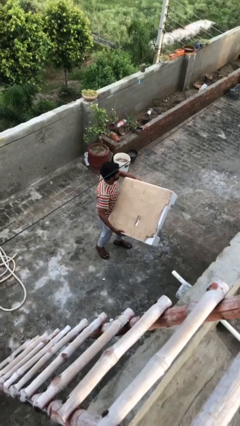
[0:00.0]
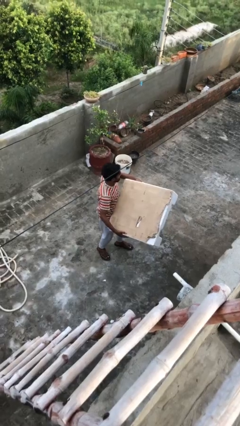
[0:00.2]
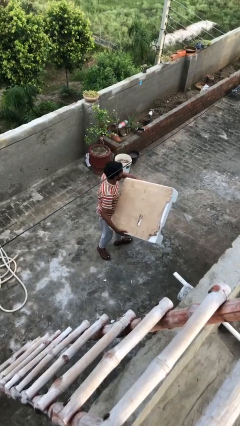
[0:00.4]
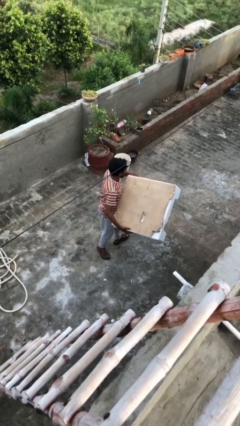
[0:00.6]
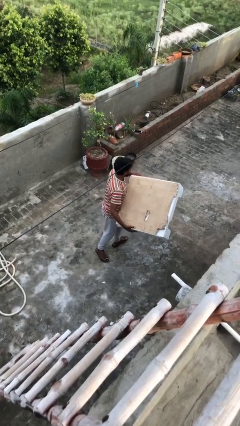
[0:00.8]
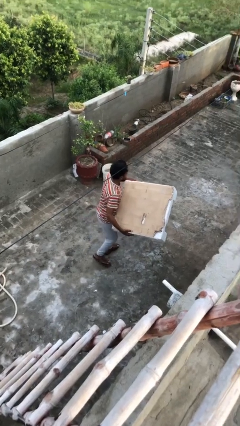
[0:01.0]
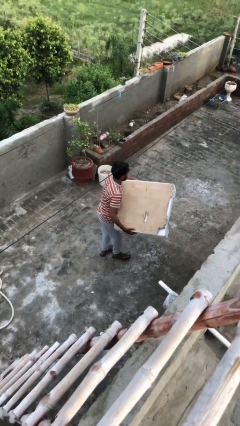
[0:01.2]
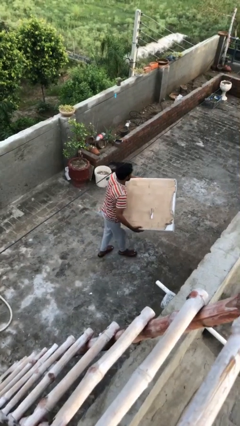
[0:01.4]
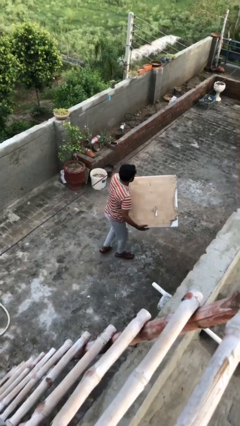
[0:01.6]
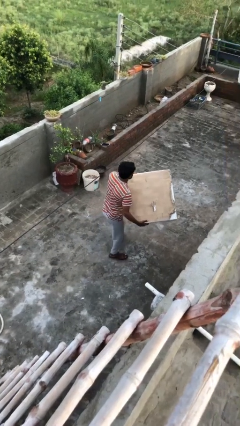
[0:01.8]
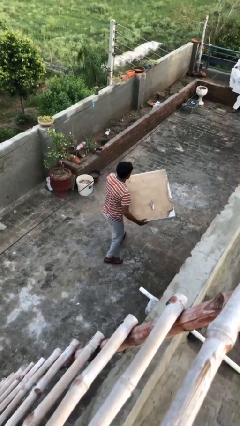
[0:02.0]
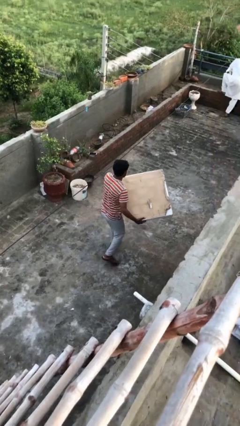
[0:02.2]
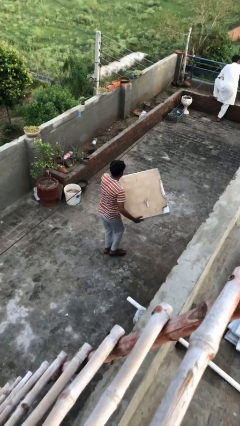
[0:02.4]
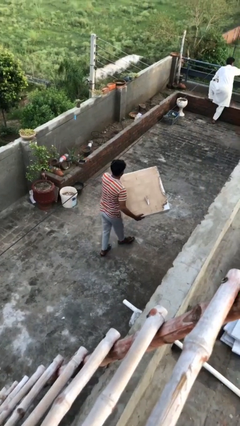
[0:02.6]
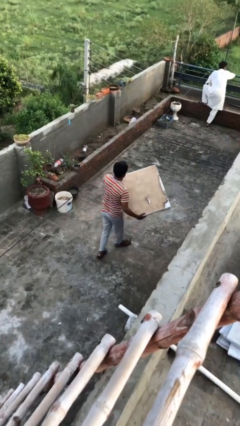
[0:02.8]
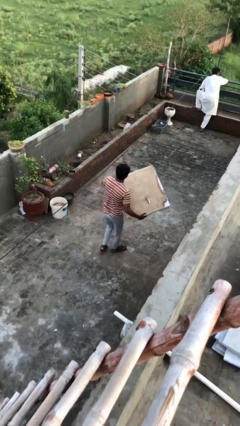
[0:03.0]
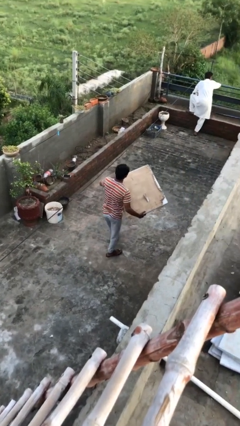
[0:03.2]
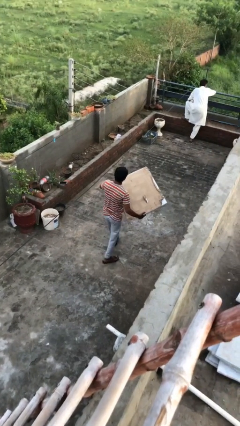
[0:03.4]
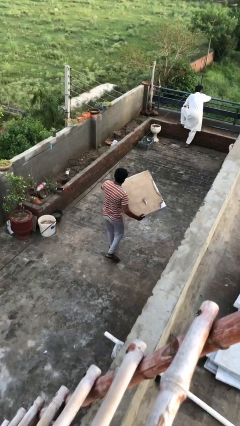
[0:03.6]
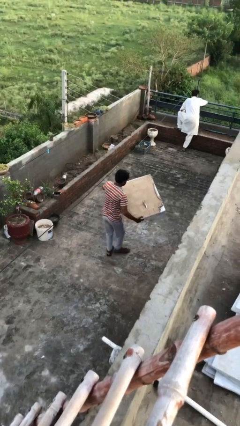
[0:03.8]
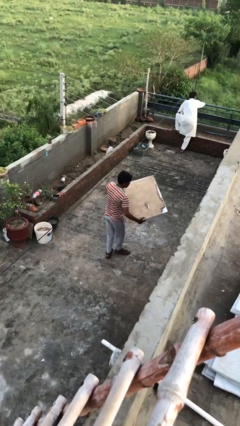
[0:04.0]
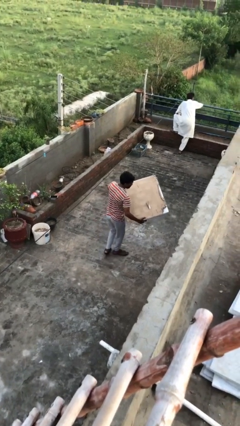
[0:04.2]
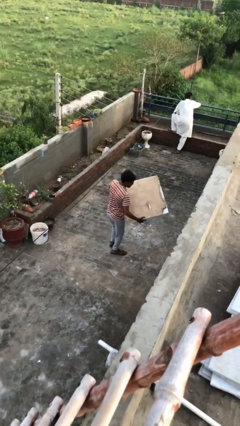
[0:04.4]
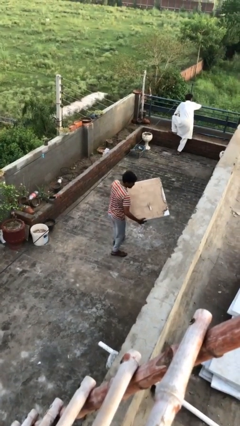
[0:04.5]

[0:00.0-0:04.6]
person carries heavy object

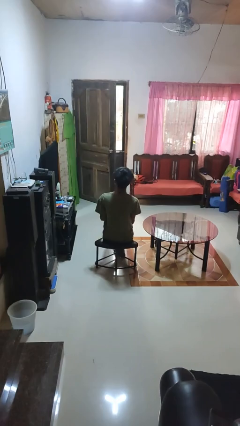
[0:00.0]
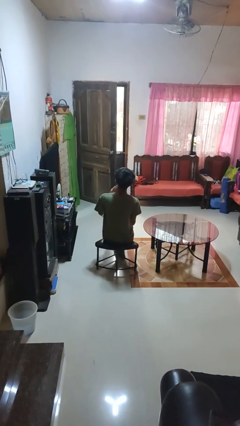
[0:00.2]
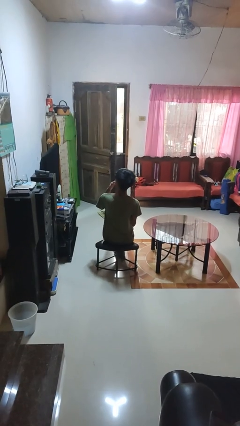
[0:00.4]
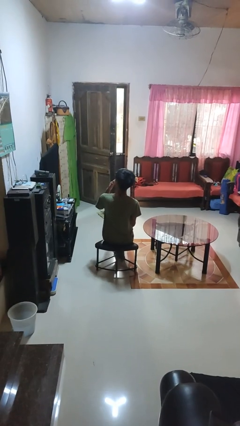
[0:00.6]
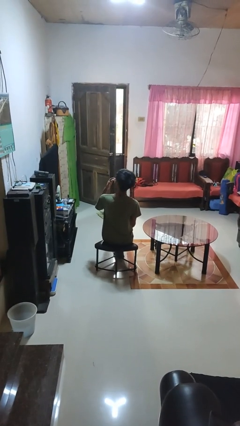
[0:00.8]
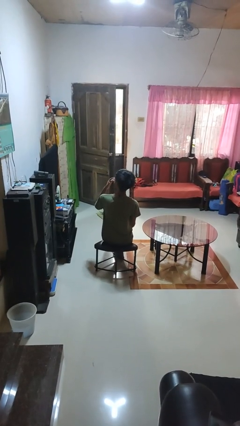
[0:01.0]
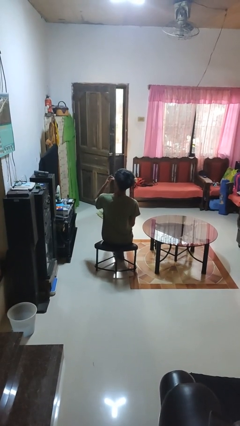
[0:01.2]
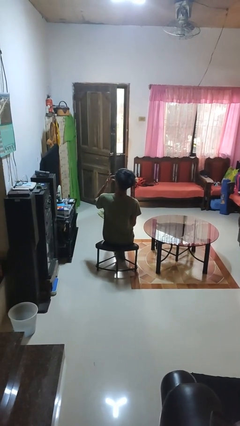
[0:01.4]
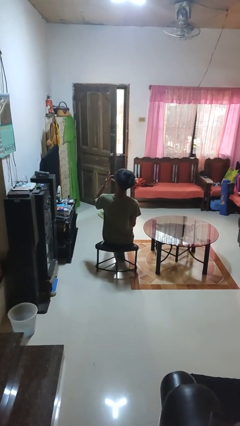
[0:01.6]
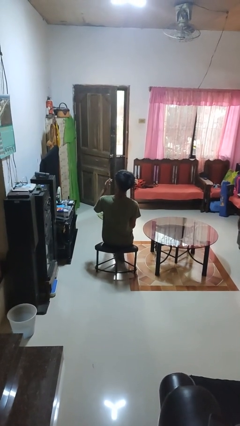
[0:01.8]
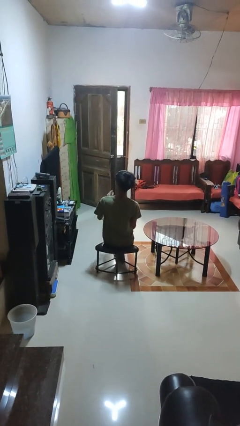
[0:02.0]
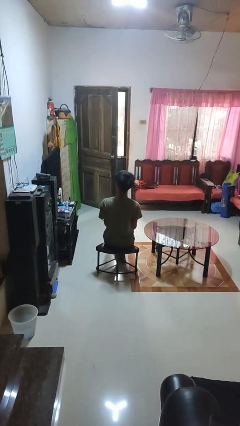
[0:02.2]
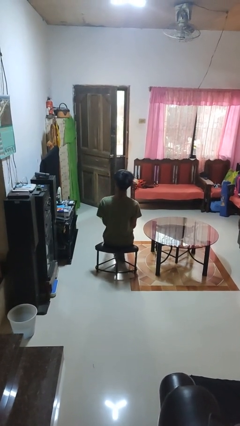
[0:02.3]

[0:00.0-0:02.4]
person licks fingers

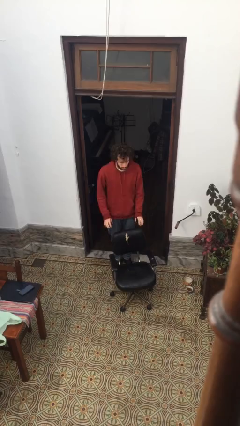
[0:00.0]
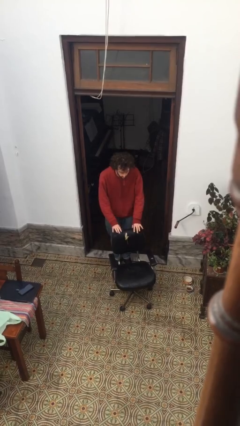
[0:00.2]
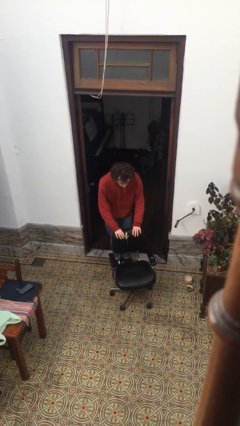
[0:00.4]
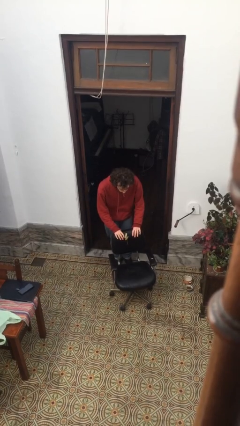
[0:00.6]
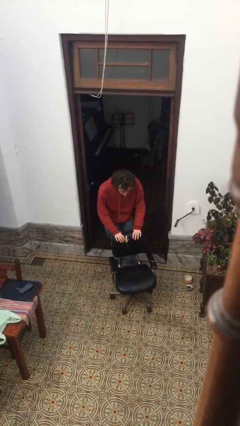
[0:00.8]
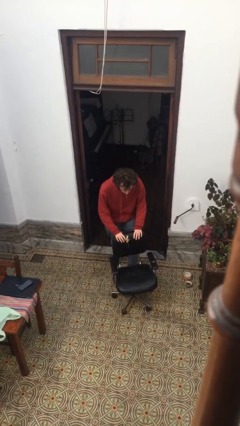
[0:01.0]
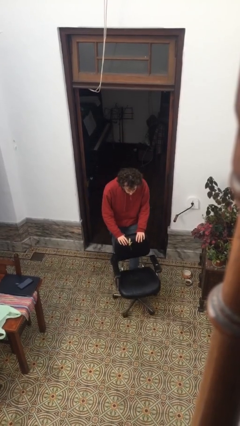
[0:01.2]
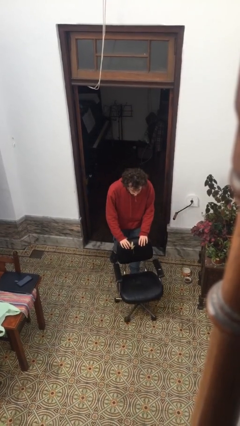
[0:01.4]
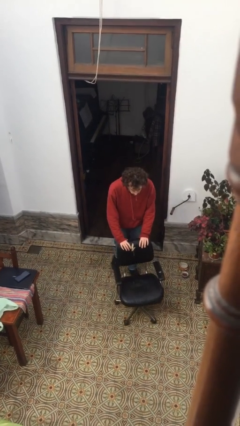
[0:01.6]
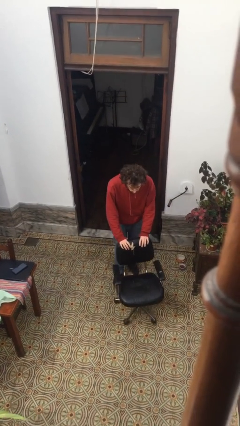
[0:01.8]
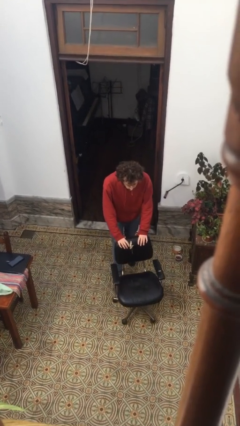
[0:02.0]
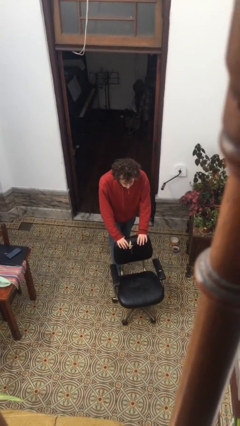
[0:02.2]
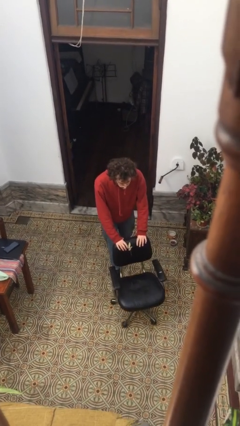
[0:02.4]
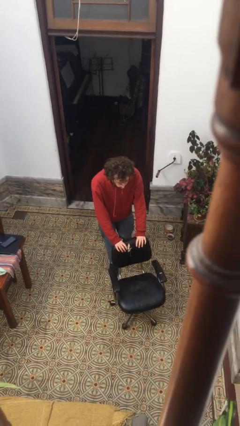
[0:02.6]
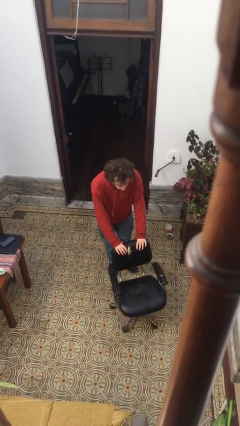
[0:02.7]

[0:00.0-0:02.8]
person pushes wheeled cart

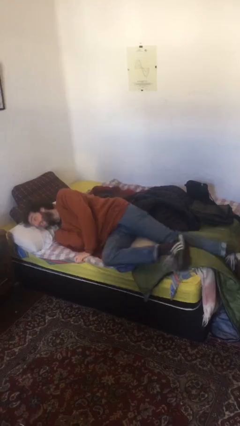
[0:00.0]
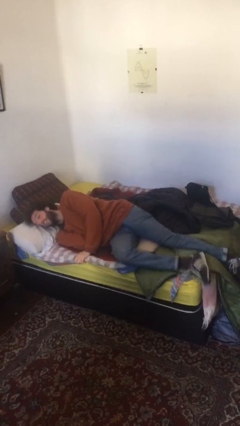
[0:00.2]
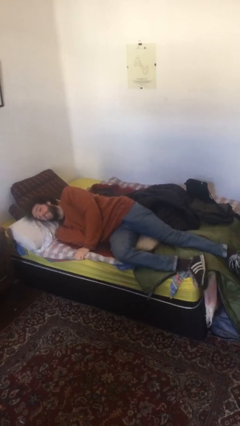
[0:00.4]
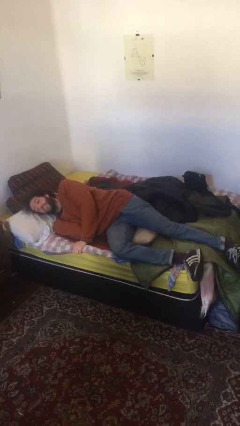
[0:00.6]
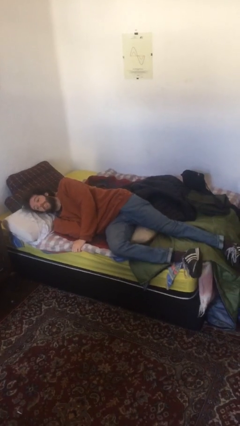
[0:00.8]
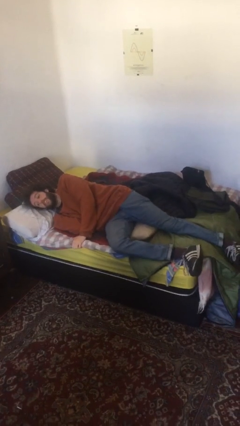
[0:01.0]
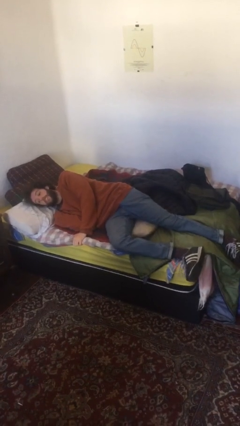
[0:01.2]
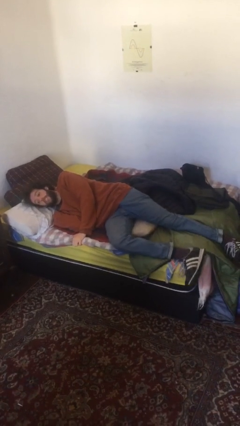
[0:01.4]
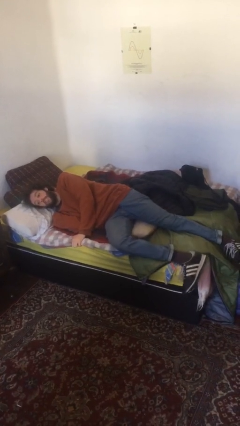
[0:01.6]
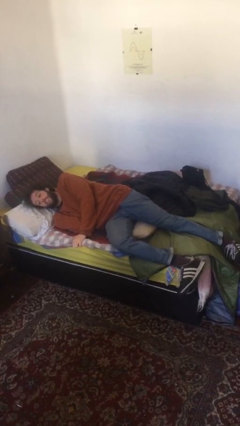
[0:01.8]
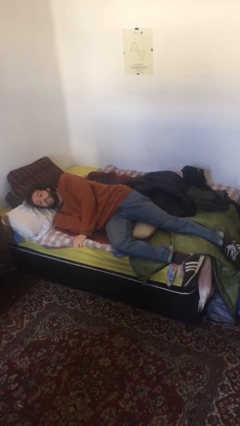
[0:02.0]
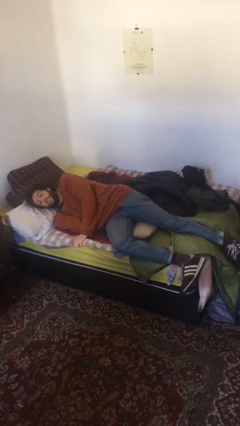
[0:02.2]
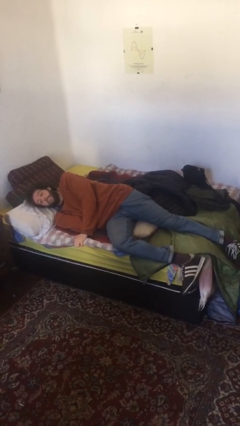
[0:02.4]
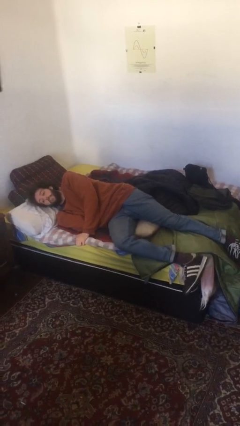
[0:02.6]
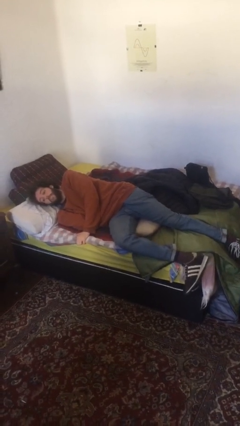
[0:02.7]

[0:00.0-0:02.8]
person lies down on bed

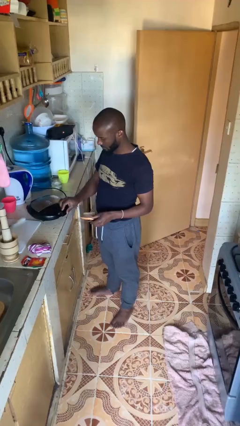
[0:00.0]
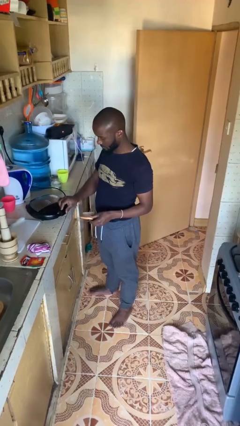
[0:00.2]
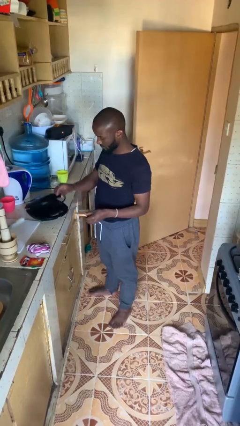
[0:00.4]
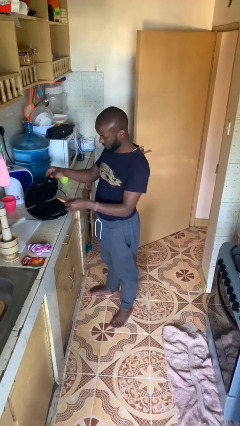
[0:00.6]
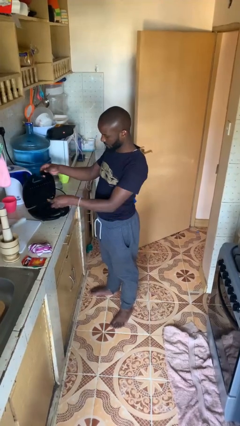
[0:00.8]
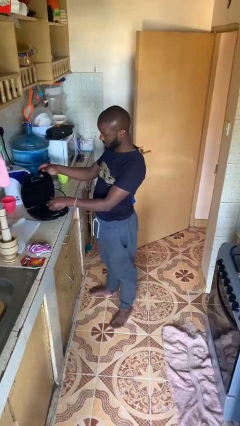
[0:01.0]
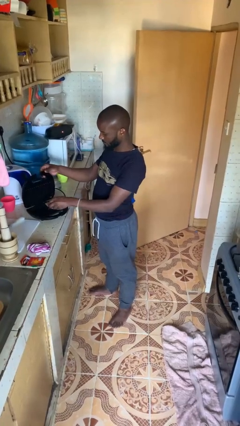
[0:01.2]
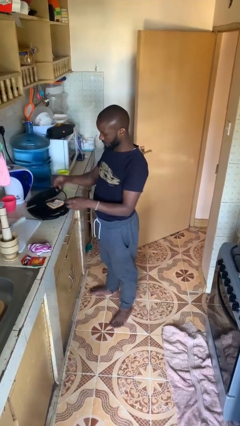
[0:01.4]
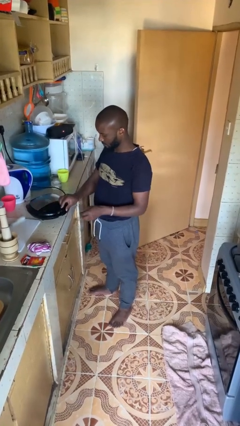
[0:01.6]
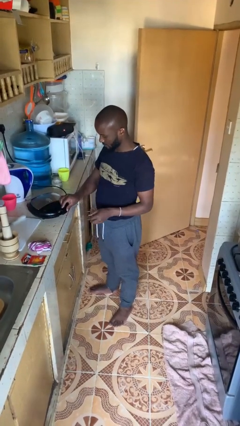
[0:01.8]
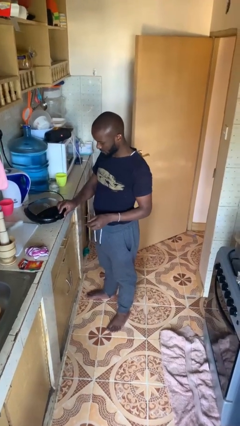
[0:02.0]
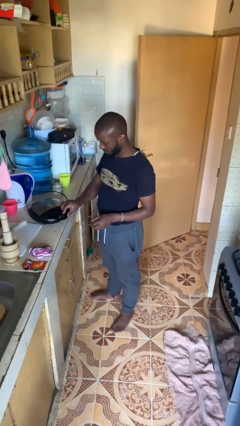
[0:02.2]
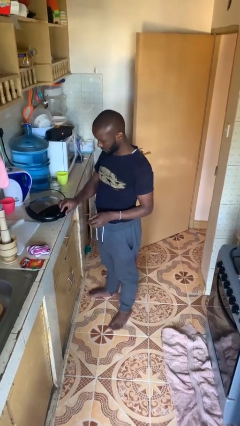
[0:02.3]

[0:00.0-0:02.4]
person puts object into toaster

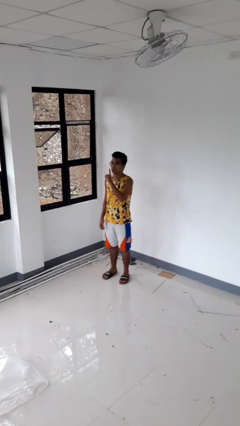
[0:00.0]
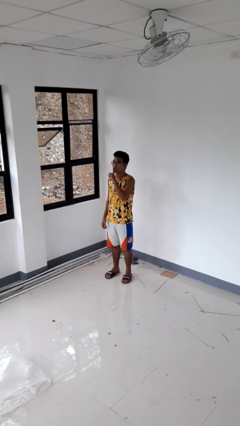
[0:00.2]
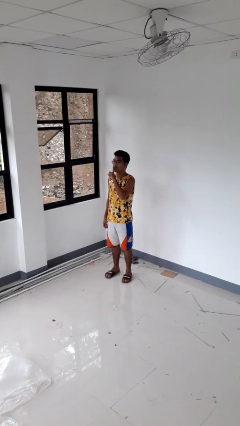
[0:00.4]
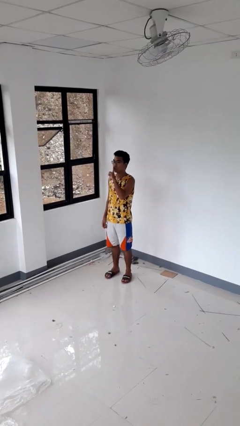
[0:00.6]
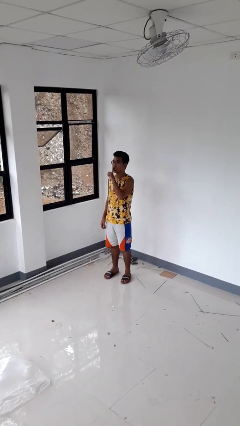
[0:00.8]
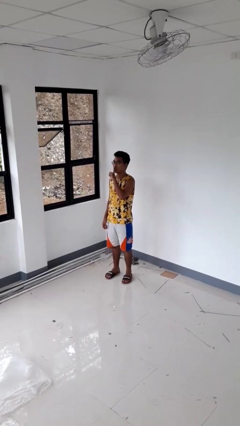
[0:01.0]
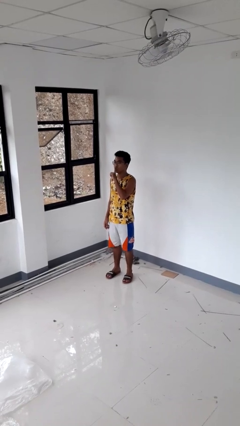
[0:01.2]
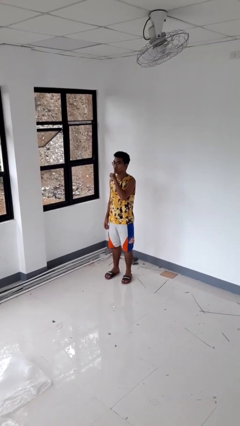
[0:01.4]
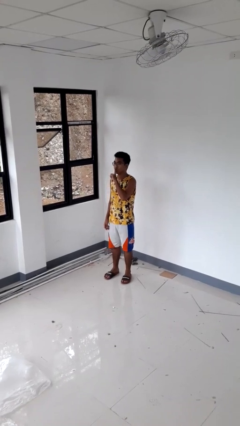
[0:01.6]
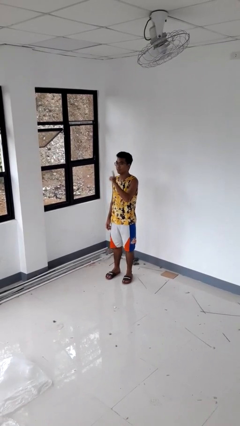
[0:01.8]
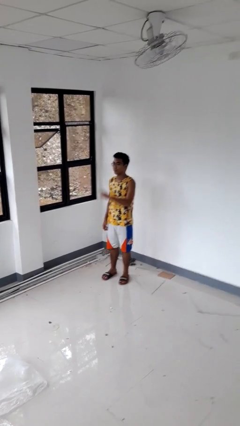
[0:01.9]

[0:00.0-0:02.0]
person gestures be quiet

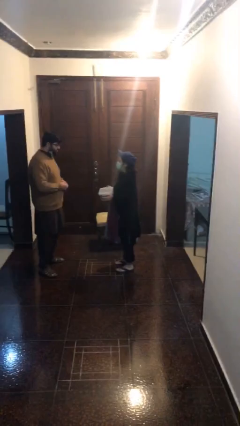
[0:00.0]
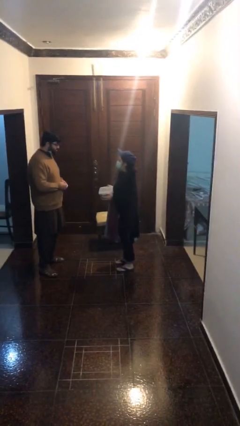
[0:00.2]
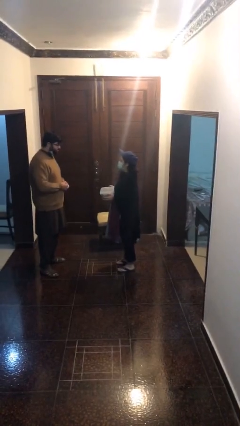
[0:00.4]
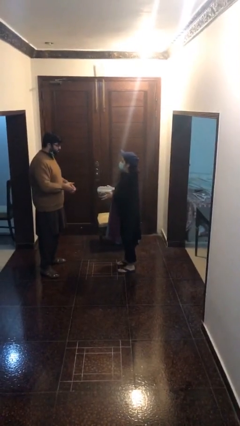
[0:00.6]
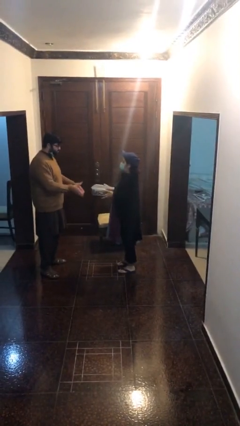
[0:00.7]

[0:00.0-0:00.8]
person transfers object to person
